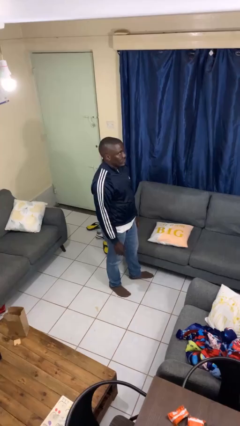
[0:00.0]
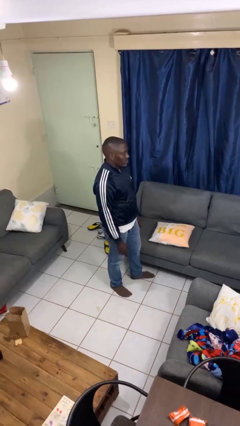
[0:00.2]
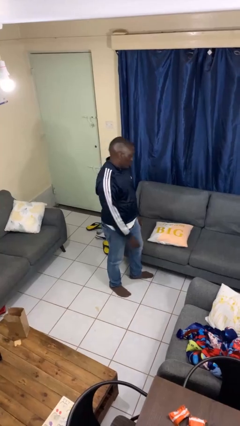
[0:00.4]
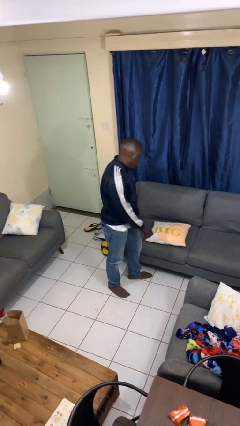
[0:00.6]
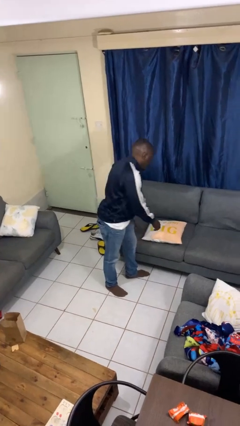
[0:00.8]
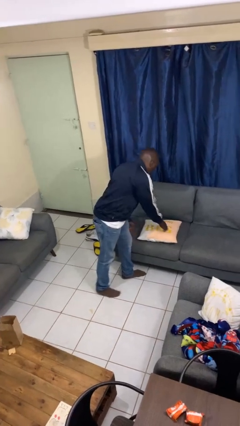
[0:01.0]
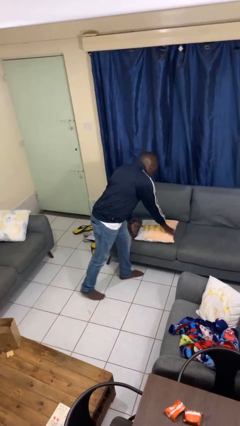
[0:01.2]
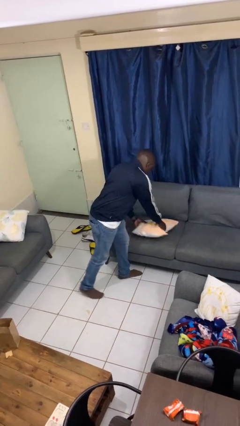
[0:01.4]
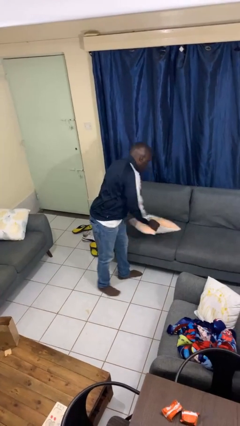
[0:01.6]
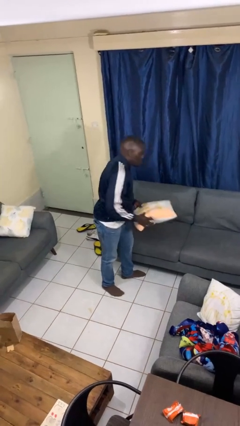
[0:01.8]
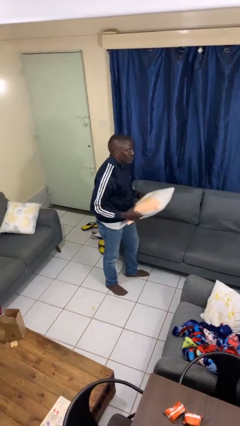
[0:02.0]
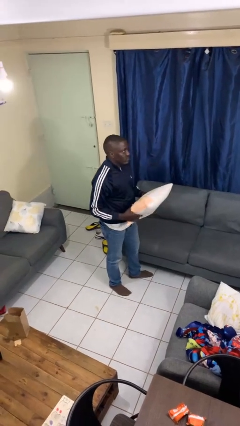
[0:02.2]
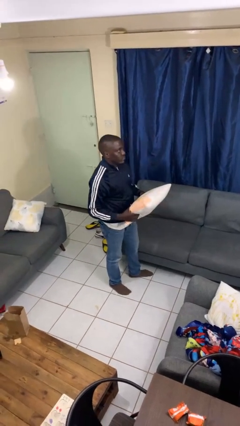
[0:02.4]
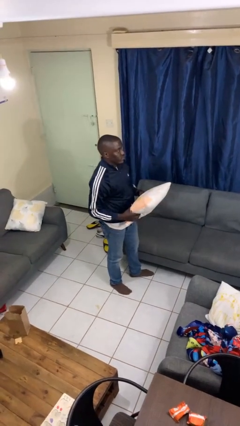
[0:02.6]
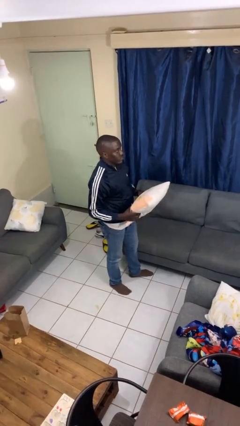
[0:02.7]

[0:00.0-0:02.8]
person picks up object from couch

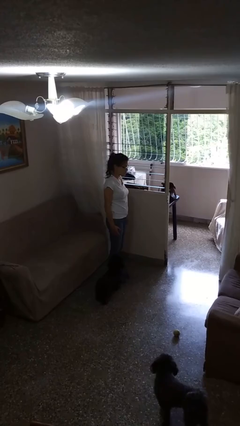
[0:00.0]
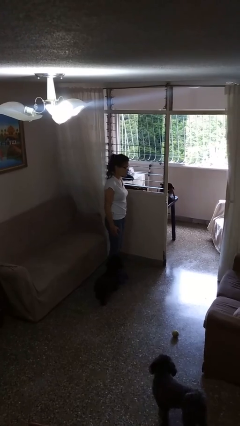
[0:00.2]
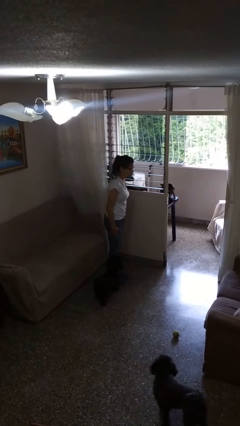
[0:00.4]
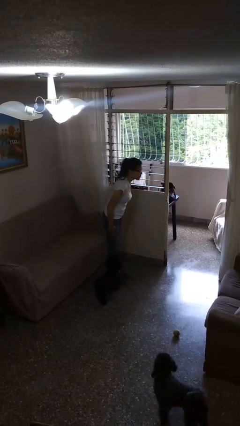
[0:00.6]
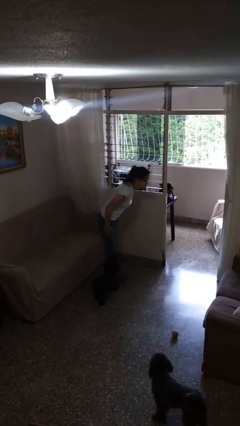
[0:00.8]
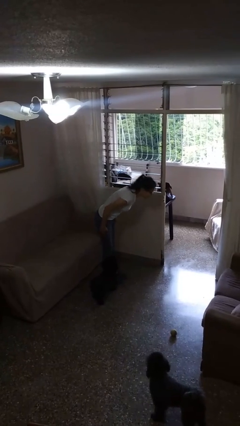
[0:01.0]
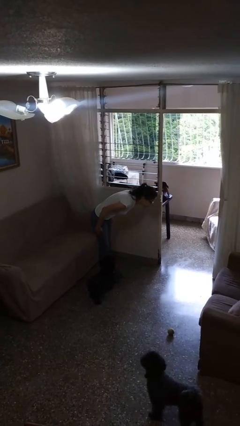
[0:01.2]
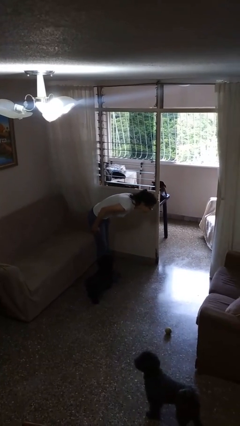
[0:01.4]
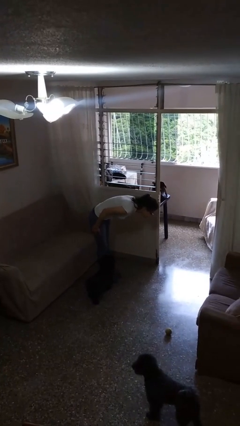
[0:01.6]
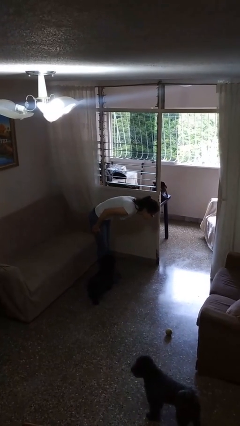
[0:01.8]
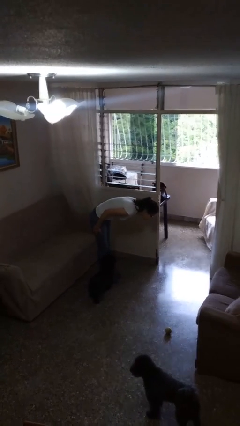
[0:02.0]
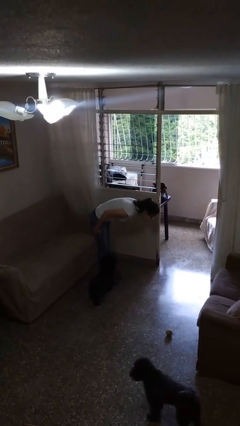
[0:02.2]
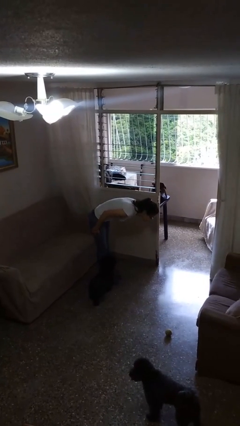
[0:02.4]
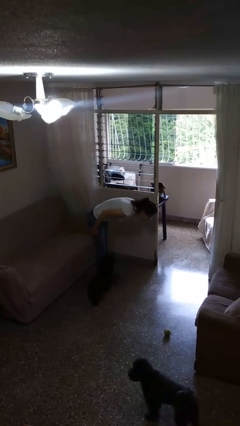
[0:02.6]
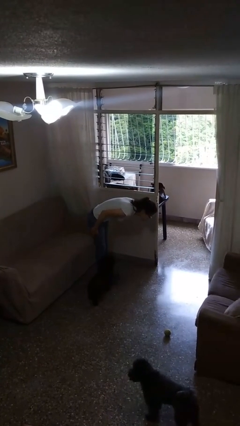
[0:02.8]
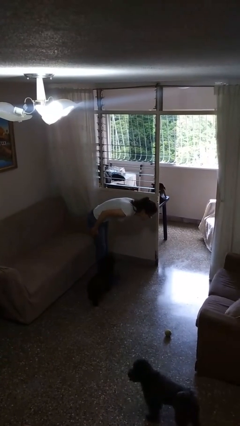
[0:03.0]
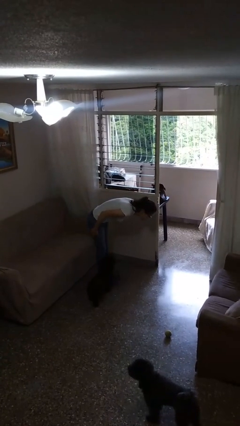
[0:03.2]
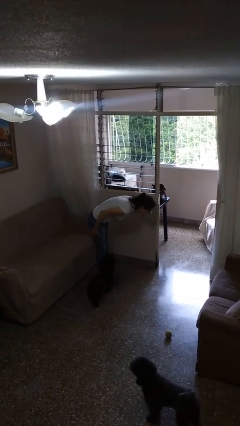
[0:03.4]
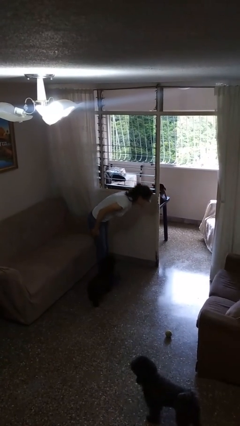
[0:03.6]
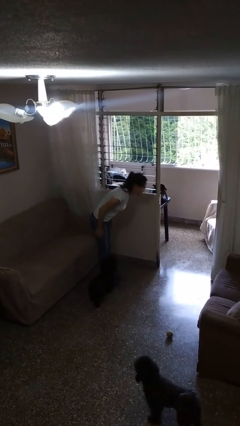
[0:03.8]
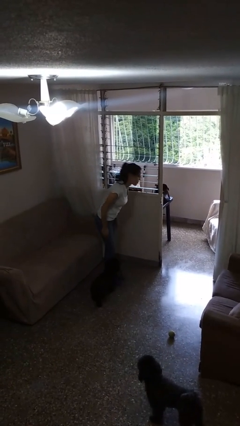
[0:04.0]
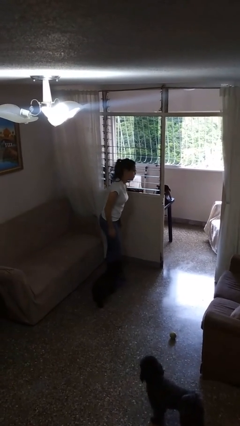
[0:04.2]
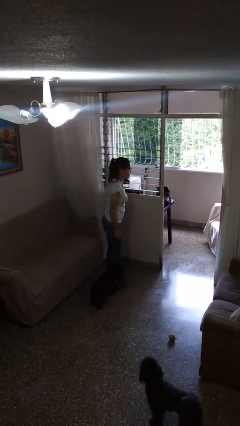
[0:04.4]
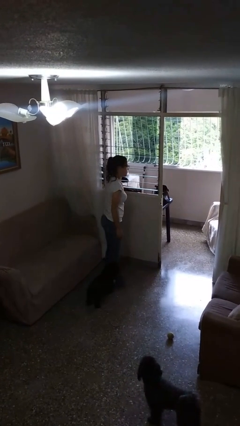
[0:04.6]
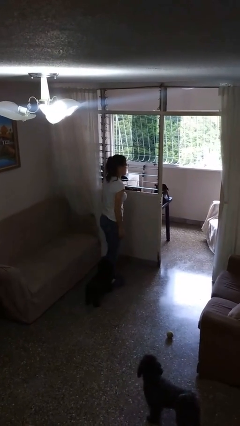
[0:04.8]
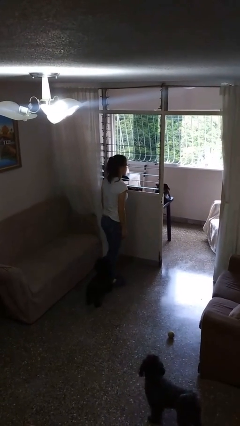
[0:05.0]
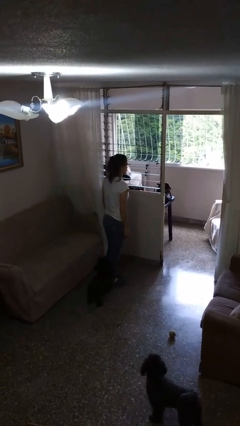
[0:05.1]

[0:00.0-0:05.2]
person bows

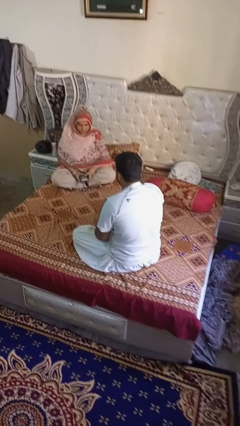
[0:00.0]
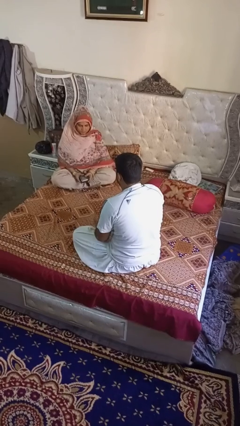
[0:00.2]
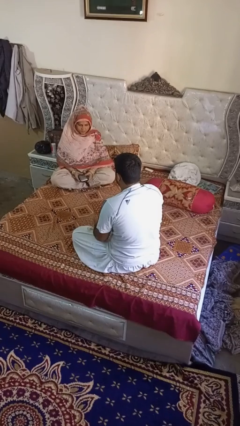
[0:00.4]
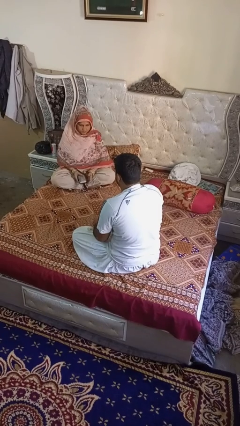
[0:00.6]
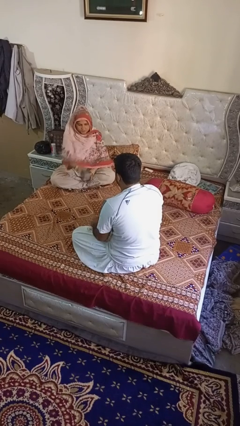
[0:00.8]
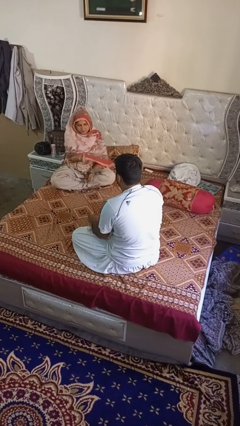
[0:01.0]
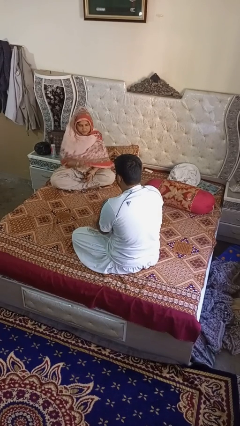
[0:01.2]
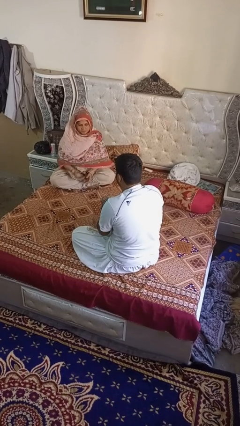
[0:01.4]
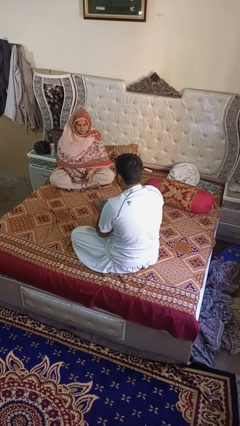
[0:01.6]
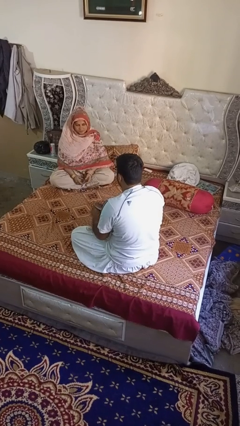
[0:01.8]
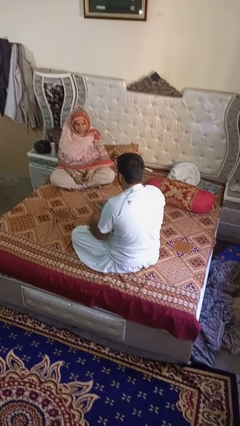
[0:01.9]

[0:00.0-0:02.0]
person catches object from person

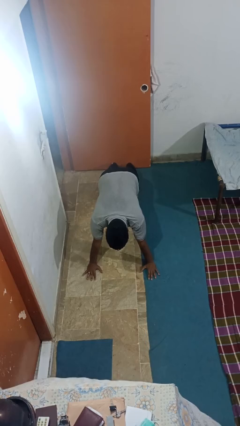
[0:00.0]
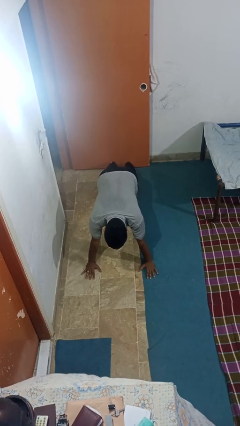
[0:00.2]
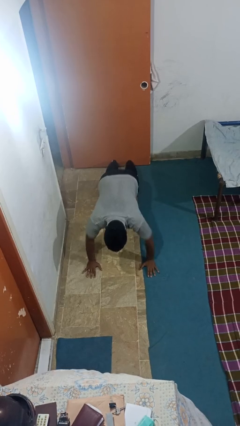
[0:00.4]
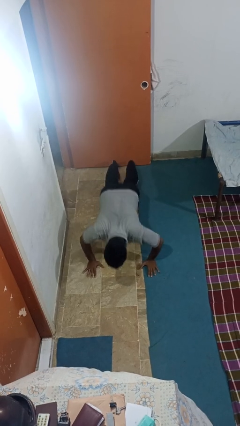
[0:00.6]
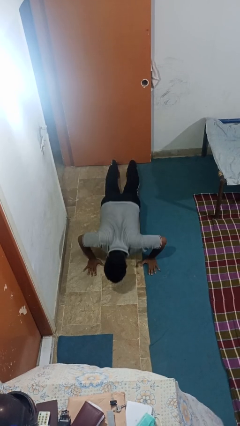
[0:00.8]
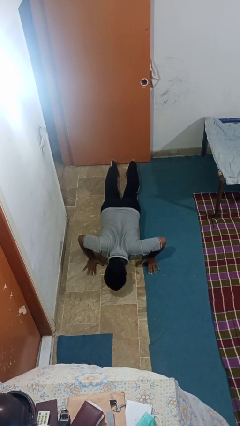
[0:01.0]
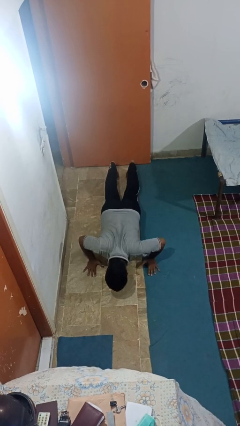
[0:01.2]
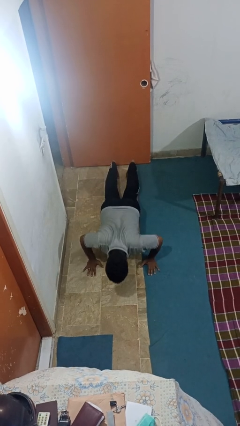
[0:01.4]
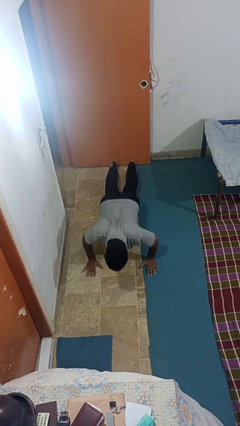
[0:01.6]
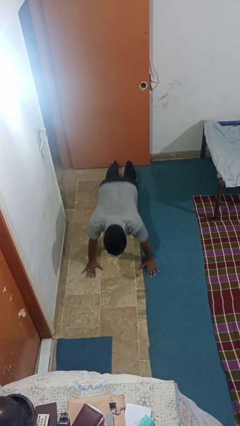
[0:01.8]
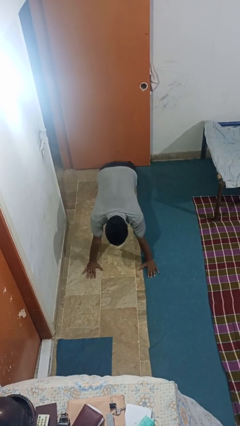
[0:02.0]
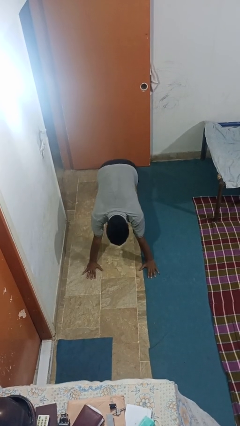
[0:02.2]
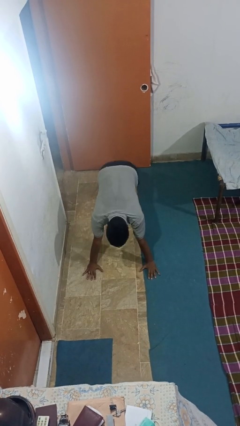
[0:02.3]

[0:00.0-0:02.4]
person exercises with pushup

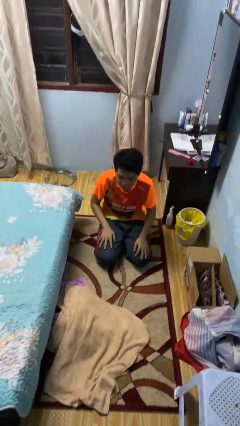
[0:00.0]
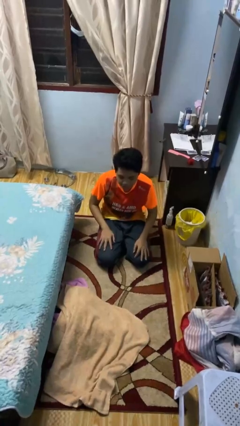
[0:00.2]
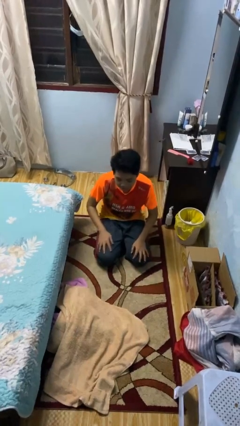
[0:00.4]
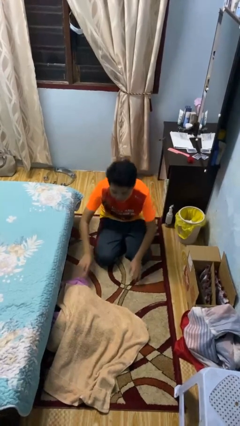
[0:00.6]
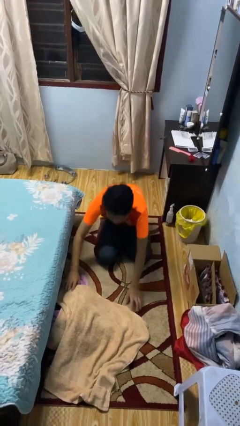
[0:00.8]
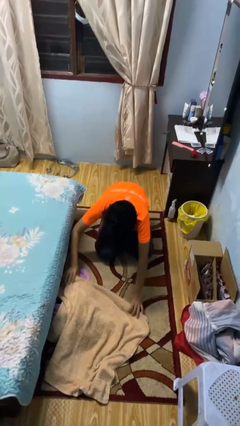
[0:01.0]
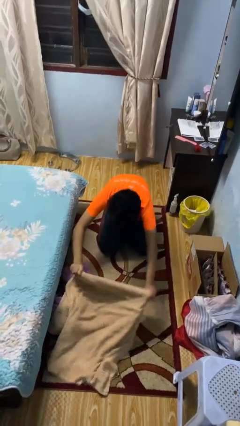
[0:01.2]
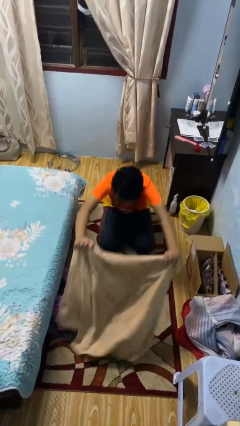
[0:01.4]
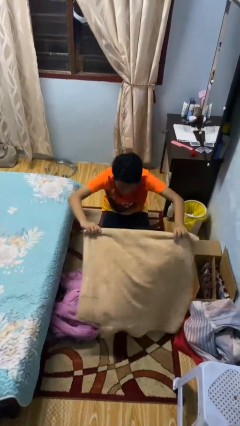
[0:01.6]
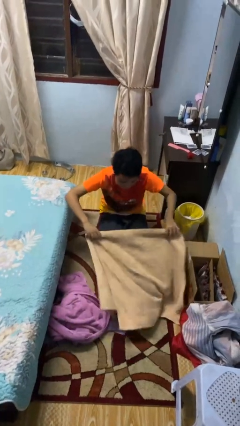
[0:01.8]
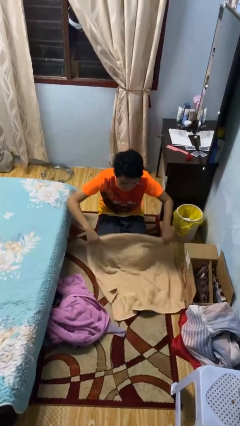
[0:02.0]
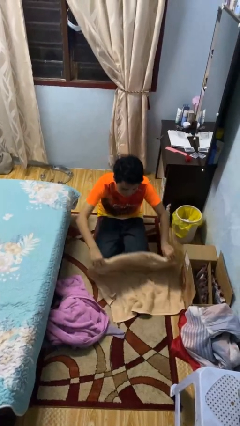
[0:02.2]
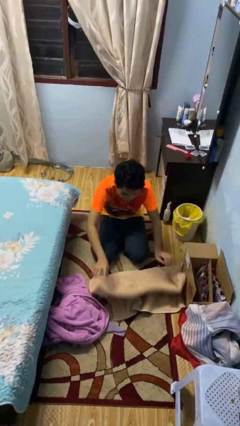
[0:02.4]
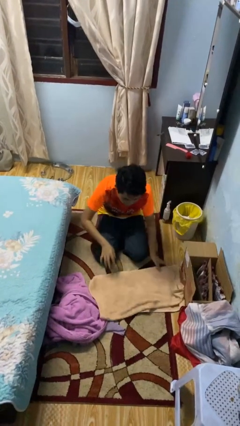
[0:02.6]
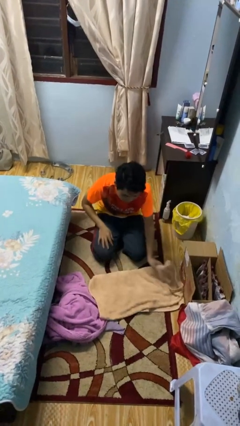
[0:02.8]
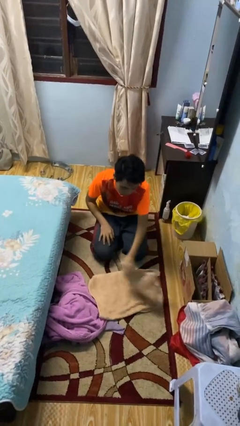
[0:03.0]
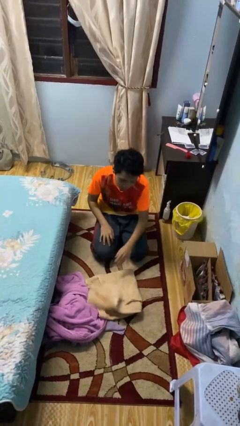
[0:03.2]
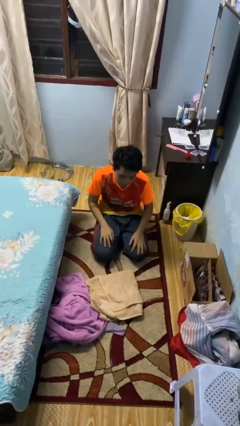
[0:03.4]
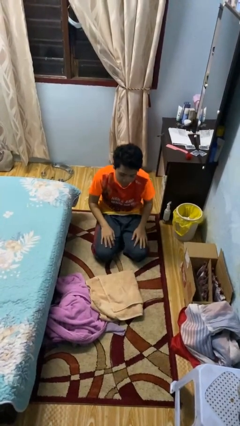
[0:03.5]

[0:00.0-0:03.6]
person folds towel

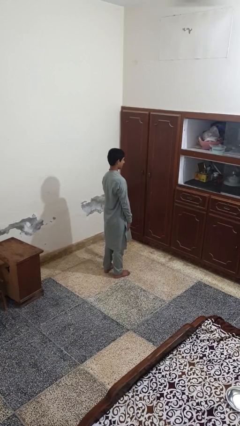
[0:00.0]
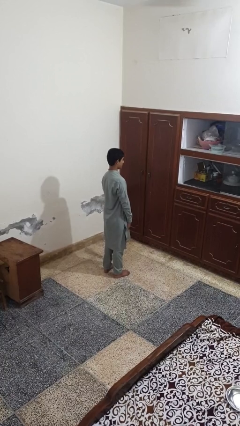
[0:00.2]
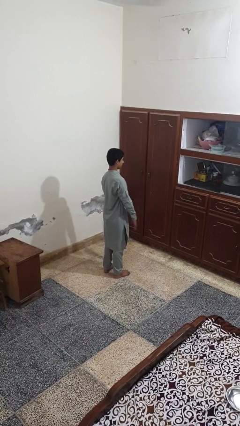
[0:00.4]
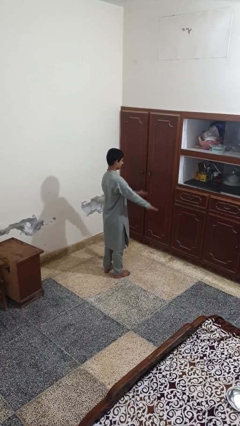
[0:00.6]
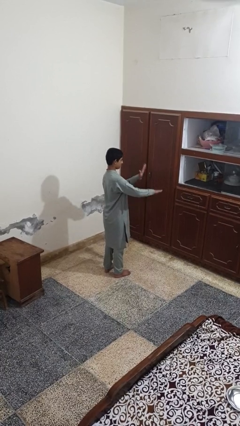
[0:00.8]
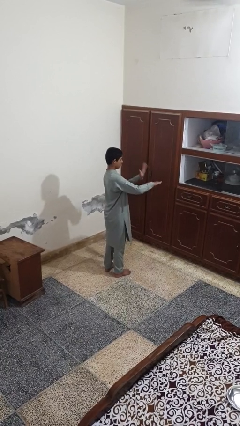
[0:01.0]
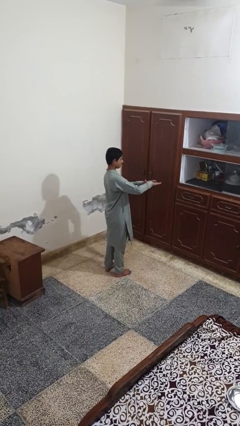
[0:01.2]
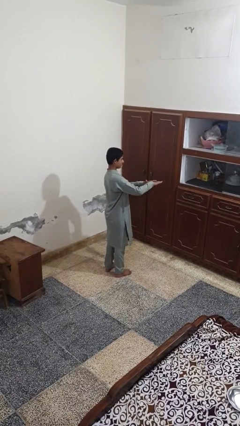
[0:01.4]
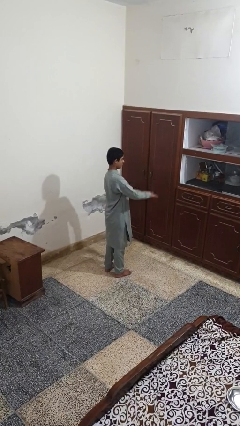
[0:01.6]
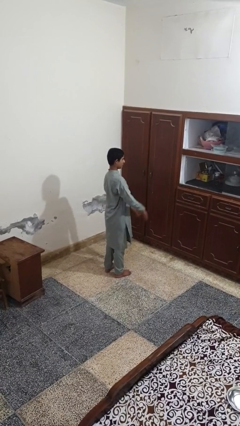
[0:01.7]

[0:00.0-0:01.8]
person swats bug
